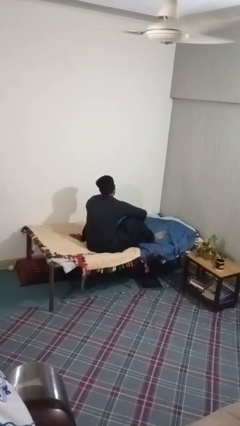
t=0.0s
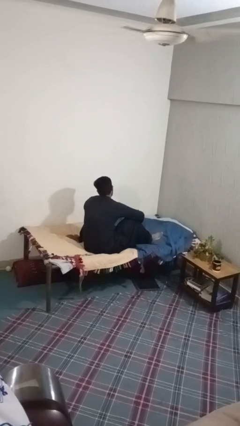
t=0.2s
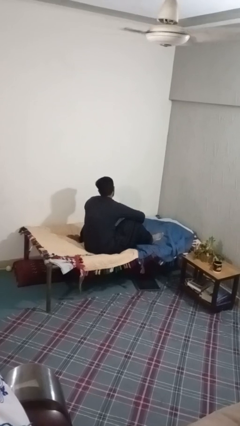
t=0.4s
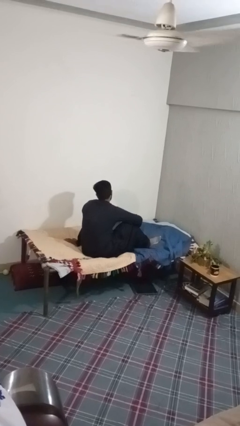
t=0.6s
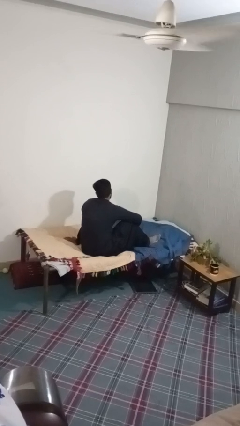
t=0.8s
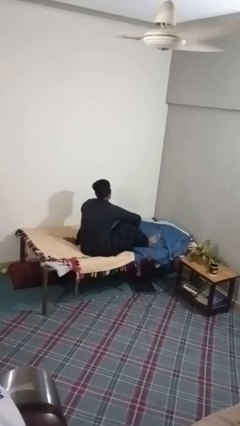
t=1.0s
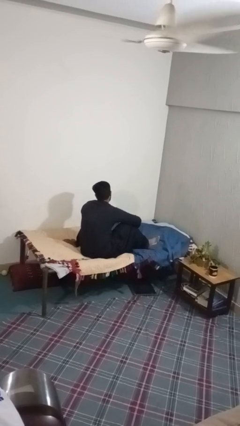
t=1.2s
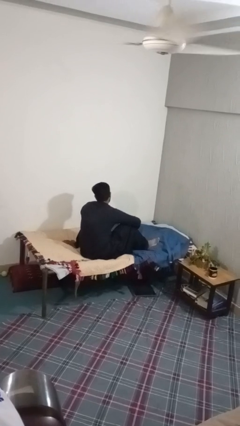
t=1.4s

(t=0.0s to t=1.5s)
person rubs foot

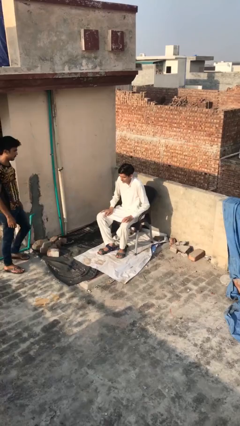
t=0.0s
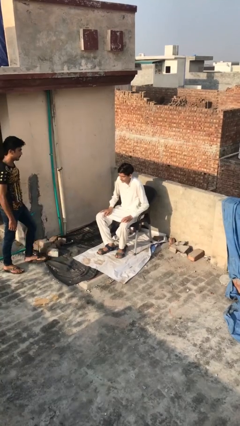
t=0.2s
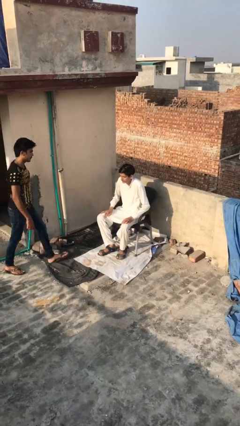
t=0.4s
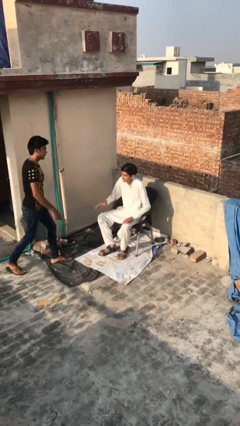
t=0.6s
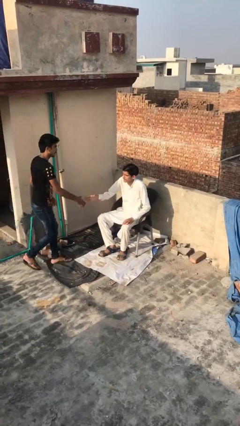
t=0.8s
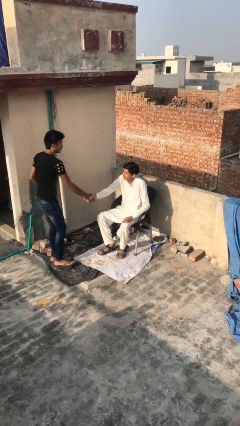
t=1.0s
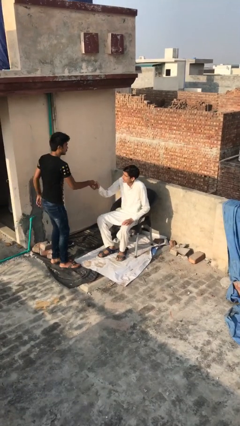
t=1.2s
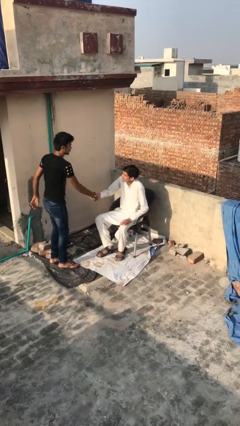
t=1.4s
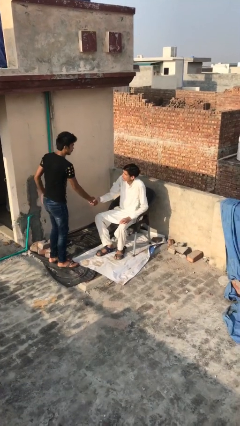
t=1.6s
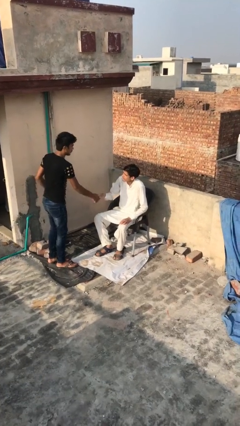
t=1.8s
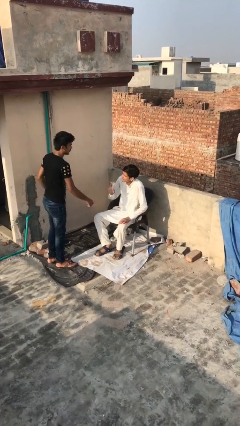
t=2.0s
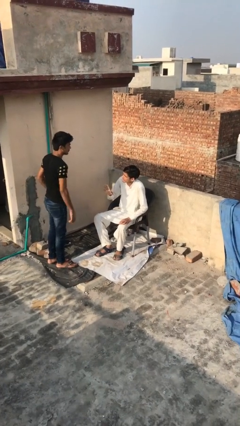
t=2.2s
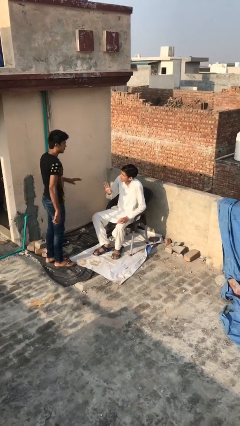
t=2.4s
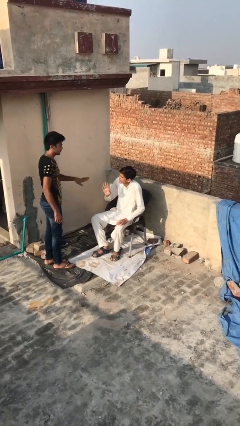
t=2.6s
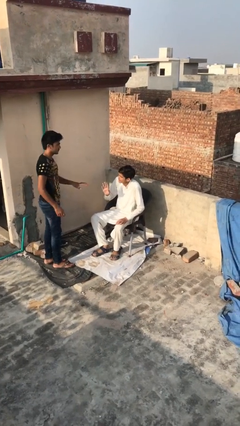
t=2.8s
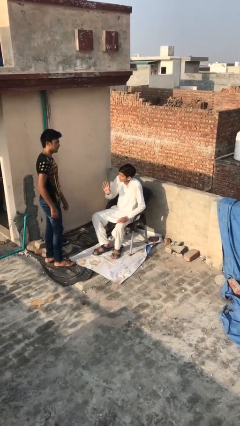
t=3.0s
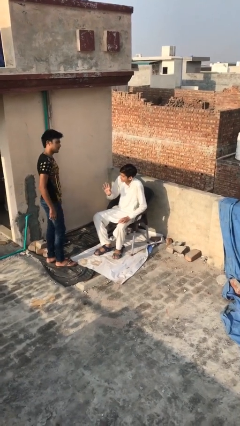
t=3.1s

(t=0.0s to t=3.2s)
person shakes hand

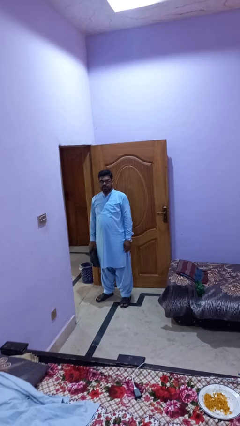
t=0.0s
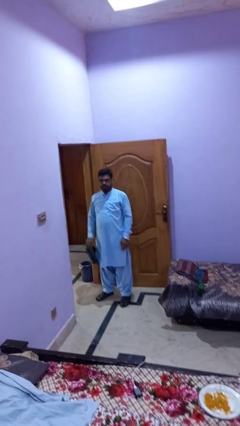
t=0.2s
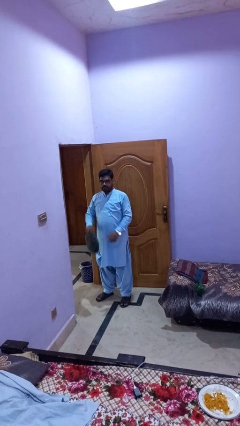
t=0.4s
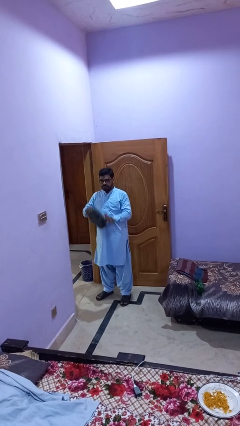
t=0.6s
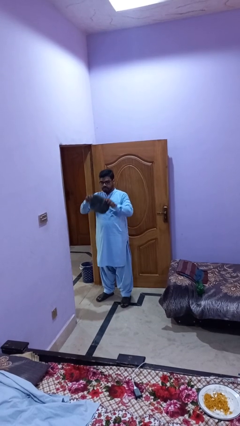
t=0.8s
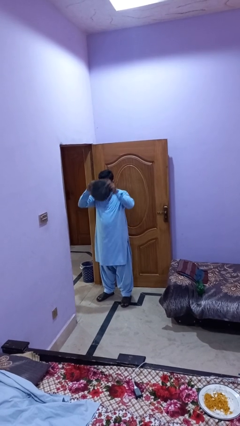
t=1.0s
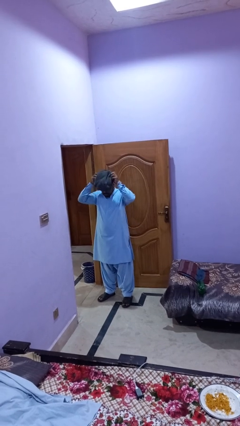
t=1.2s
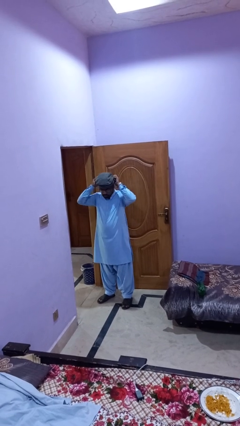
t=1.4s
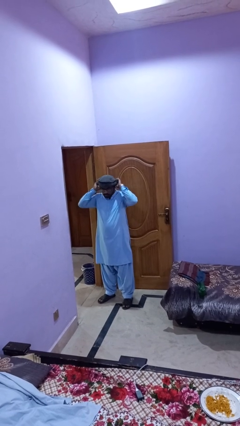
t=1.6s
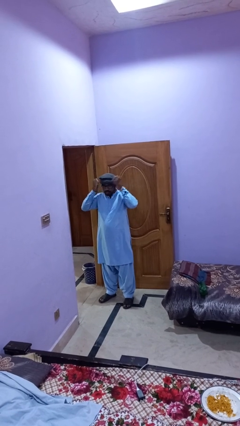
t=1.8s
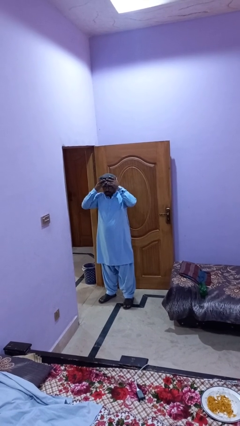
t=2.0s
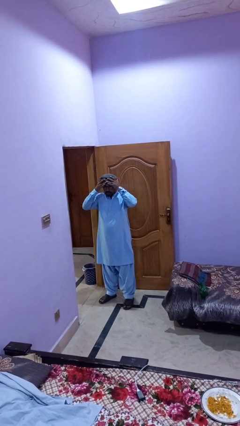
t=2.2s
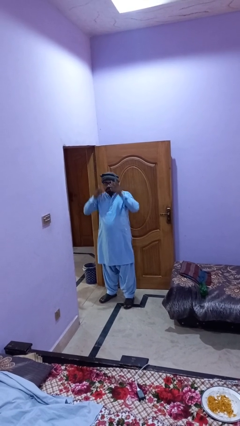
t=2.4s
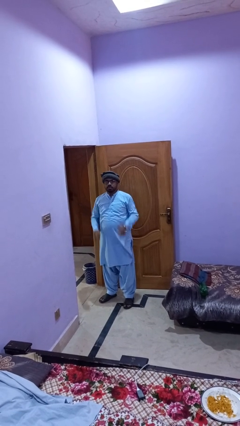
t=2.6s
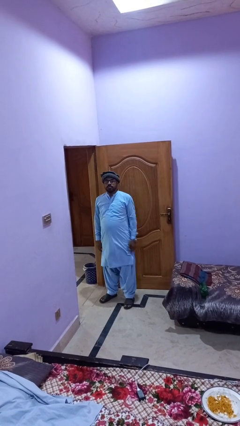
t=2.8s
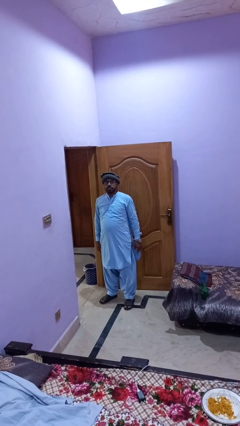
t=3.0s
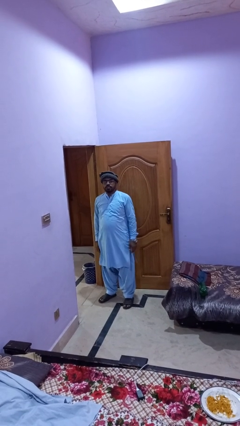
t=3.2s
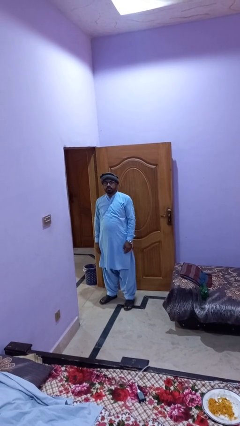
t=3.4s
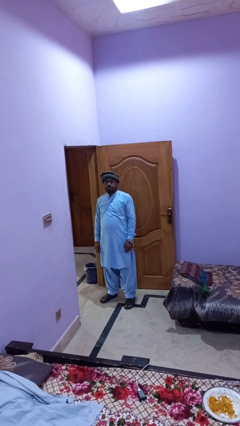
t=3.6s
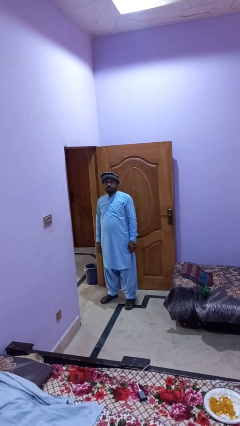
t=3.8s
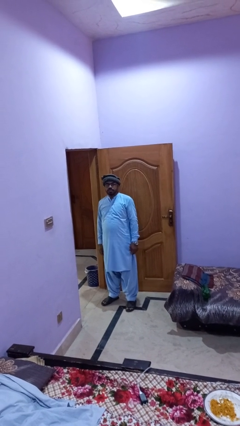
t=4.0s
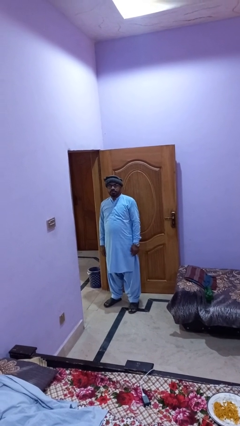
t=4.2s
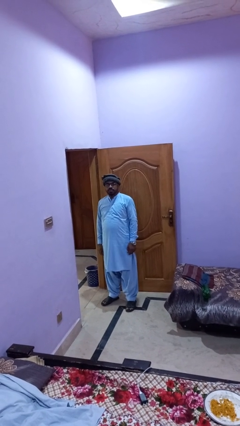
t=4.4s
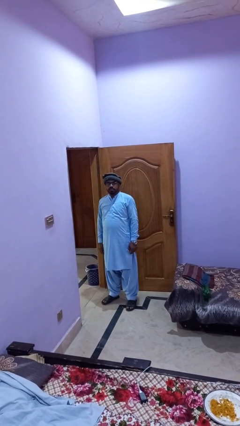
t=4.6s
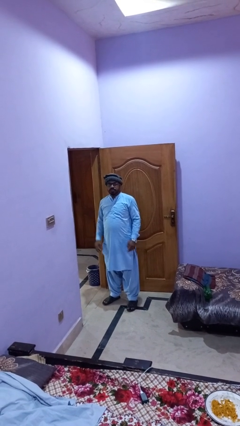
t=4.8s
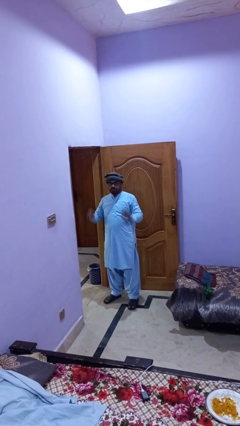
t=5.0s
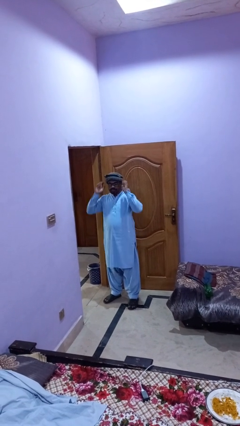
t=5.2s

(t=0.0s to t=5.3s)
person puts on hat

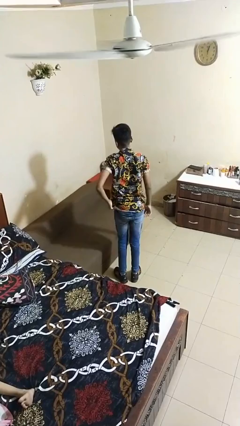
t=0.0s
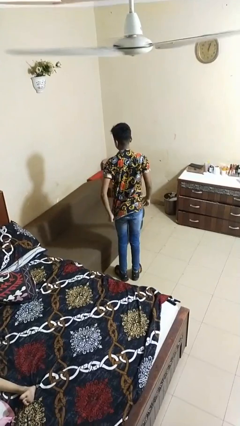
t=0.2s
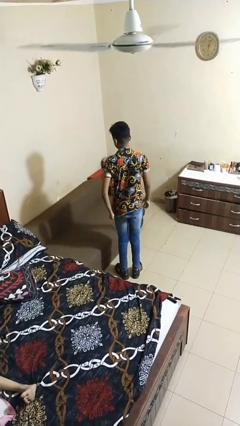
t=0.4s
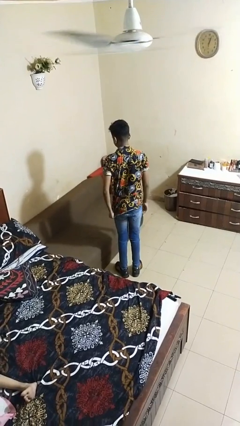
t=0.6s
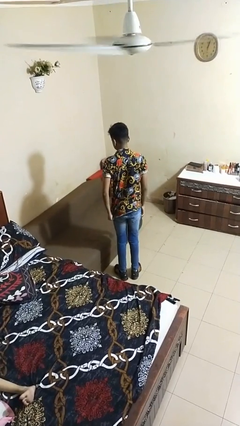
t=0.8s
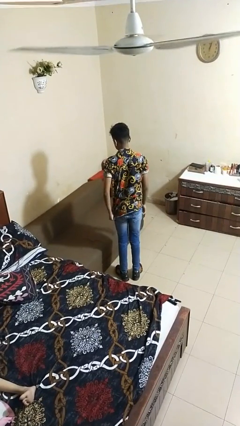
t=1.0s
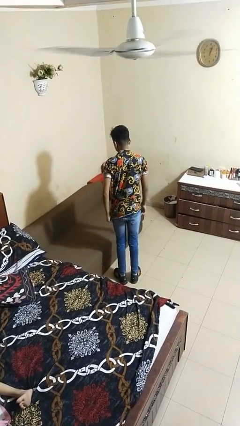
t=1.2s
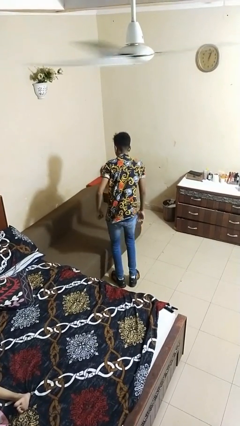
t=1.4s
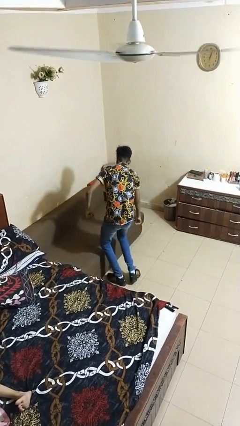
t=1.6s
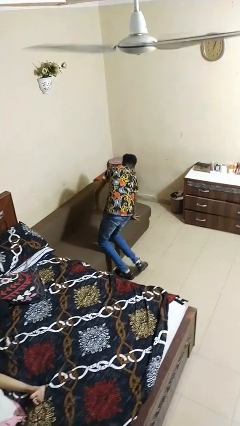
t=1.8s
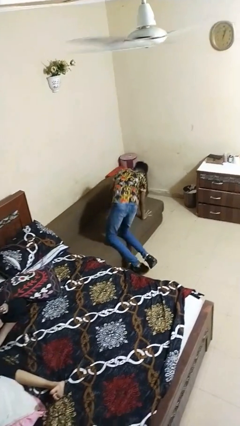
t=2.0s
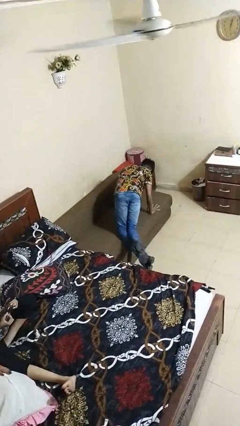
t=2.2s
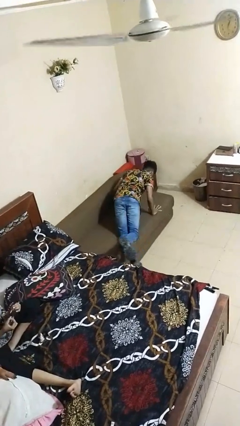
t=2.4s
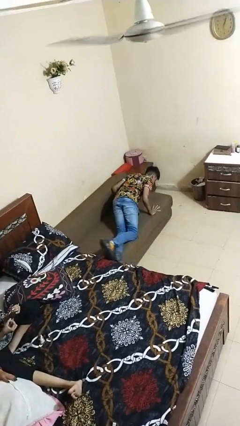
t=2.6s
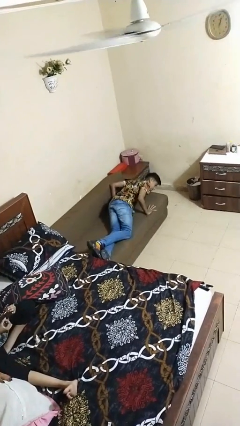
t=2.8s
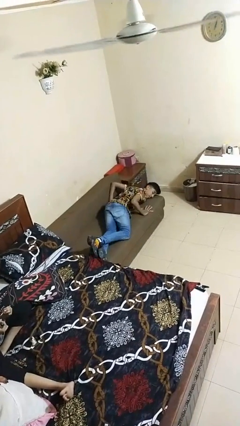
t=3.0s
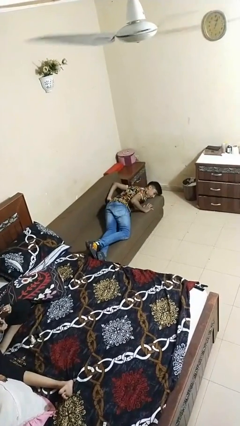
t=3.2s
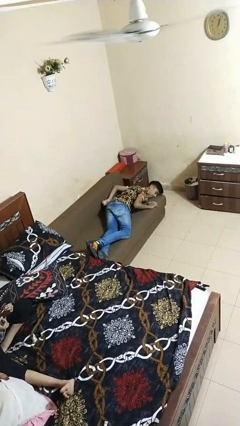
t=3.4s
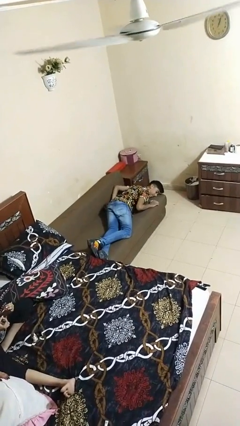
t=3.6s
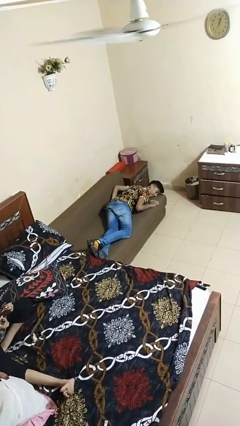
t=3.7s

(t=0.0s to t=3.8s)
person lies down on bed

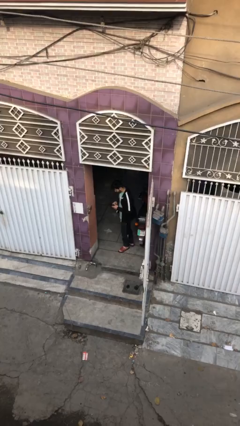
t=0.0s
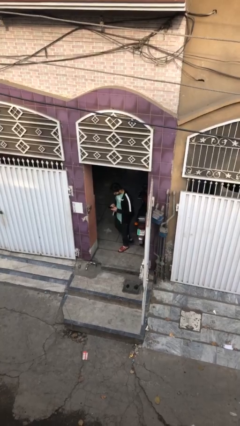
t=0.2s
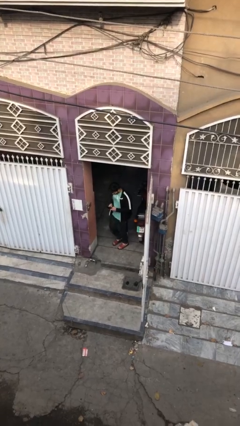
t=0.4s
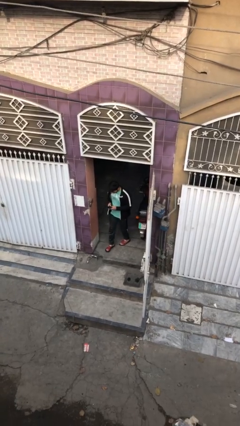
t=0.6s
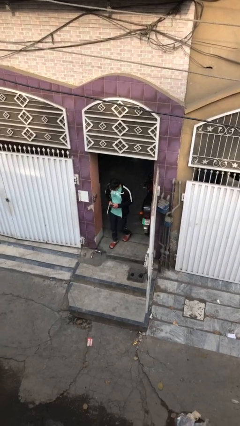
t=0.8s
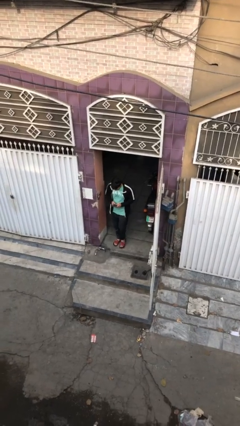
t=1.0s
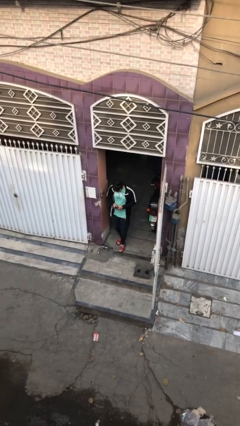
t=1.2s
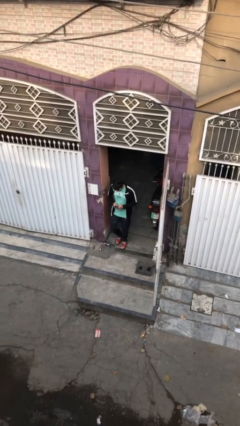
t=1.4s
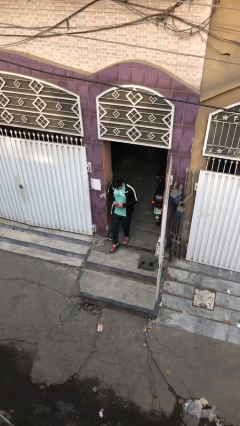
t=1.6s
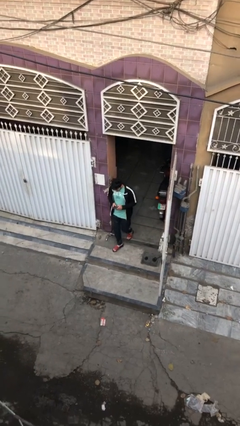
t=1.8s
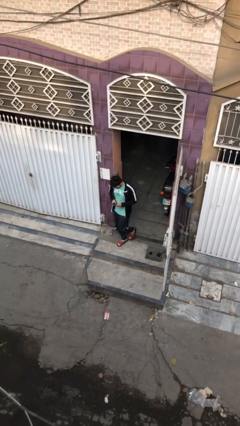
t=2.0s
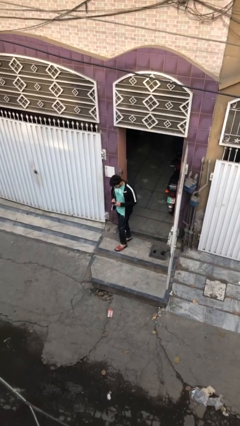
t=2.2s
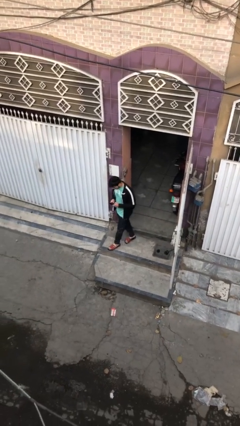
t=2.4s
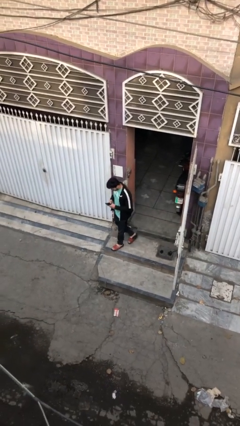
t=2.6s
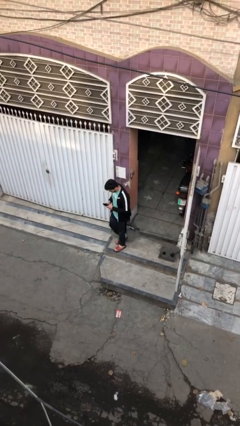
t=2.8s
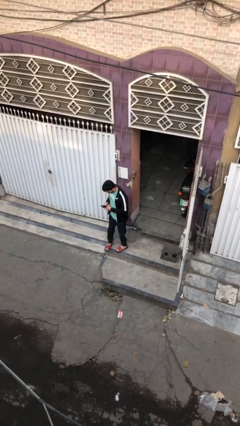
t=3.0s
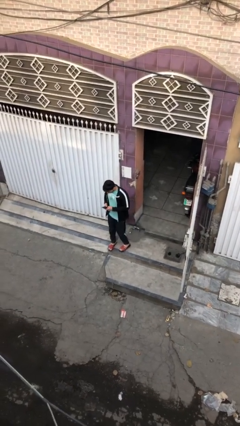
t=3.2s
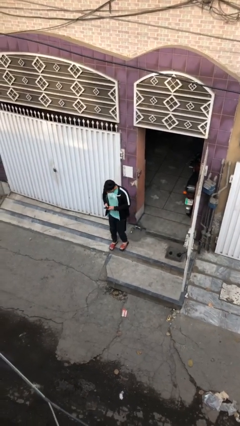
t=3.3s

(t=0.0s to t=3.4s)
person enters scene through structure
